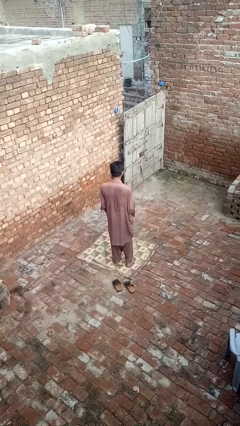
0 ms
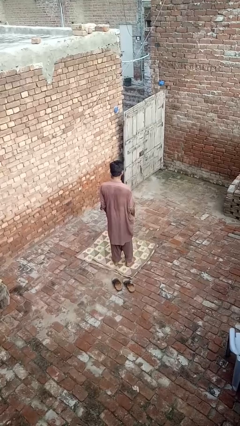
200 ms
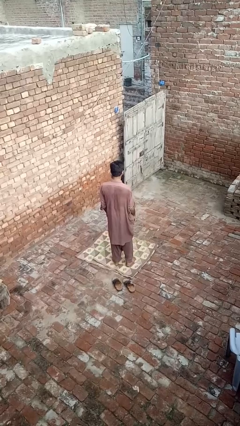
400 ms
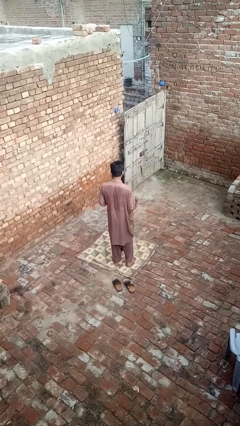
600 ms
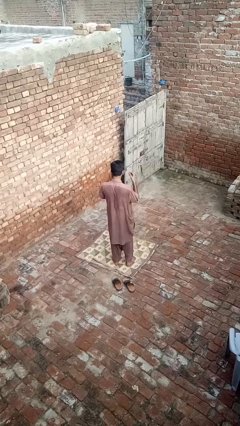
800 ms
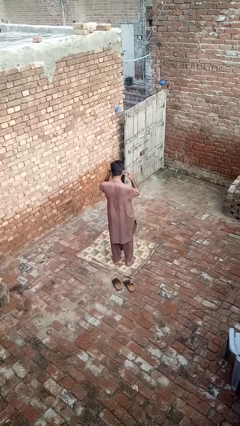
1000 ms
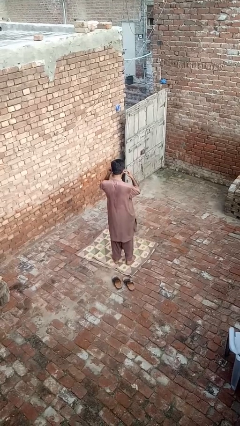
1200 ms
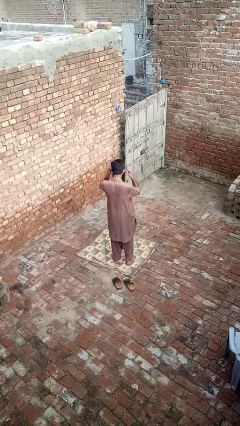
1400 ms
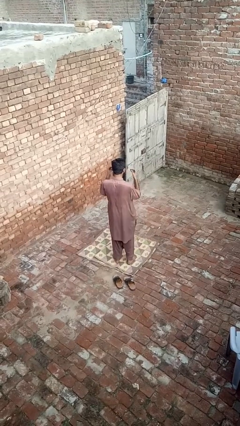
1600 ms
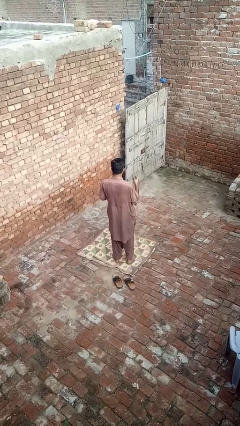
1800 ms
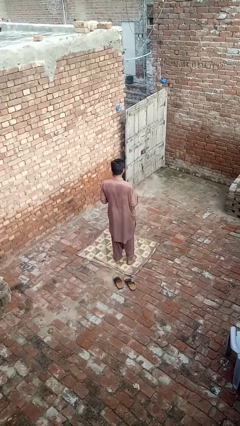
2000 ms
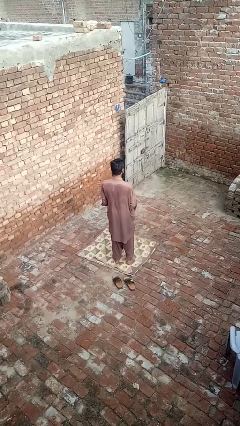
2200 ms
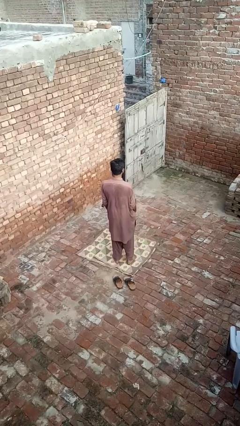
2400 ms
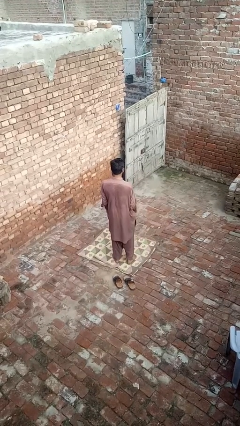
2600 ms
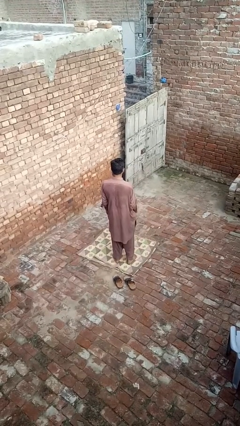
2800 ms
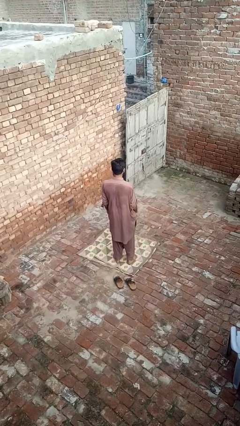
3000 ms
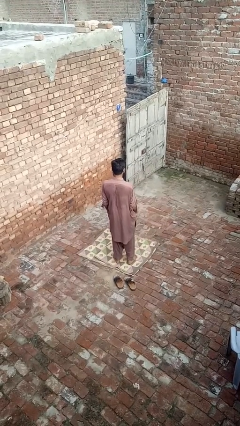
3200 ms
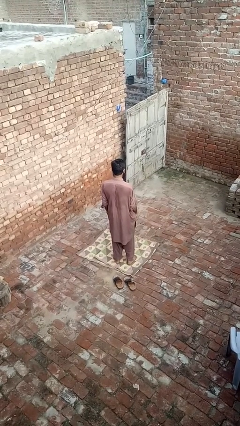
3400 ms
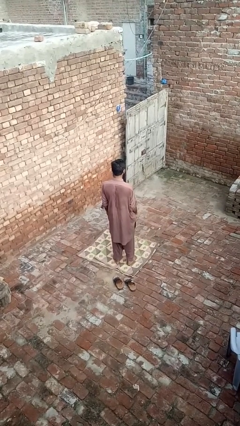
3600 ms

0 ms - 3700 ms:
person takes off headphones

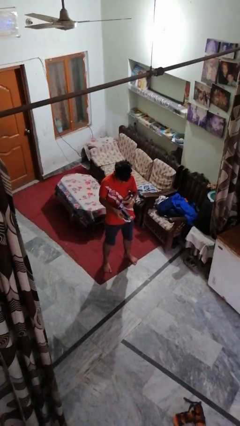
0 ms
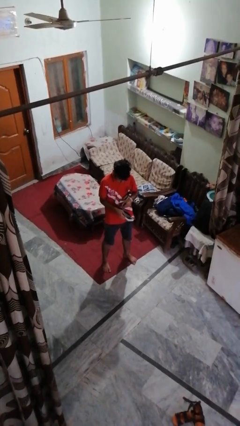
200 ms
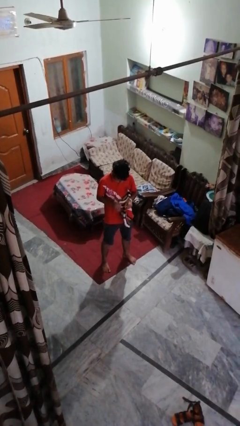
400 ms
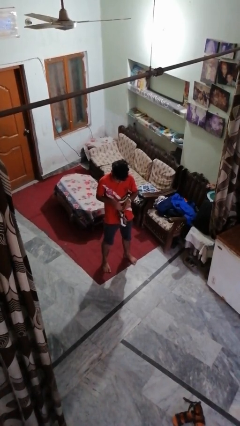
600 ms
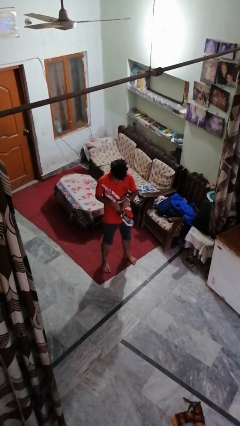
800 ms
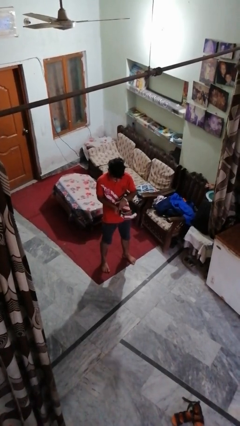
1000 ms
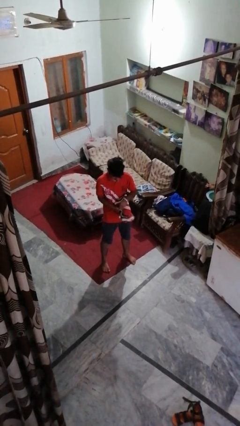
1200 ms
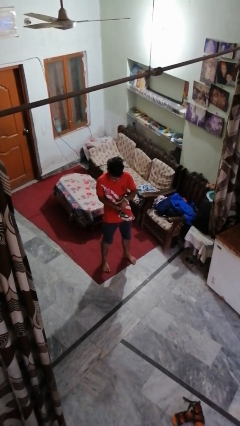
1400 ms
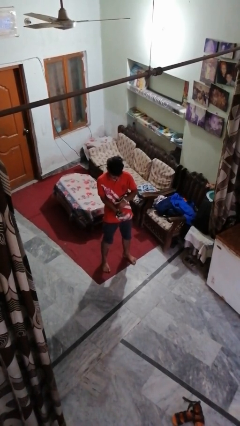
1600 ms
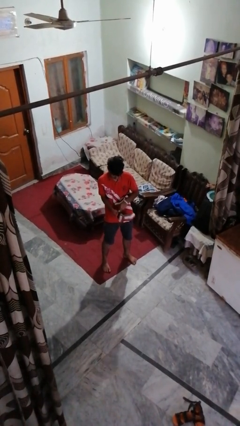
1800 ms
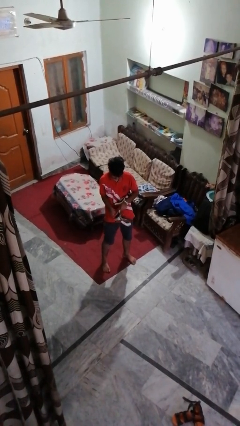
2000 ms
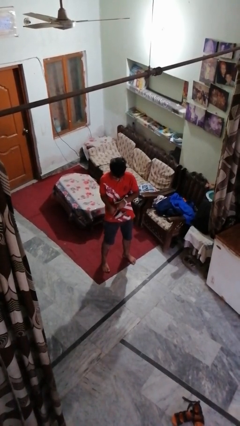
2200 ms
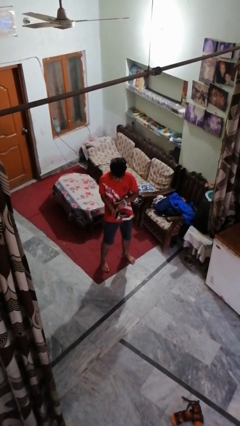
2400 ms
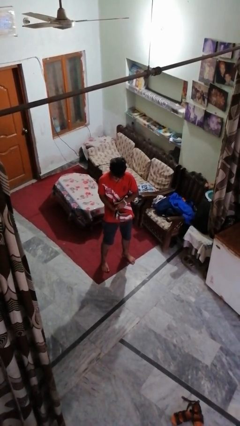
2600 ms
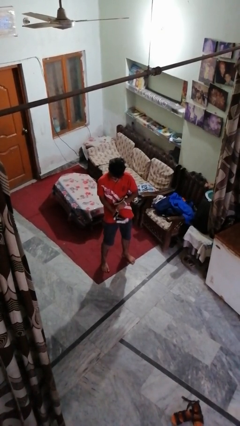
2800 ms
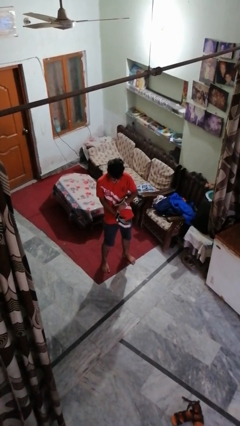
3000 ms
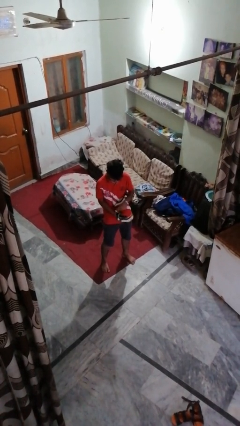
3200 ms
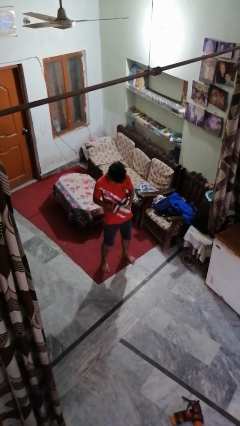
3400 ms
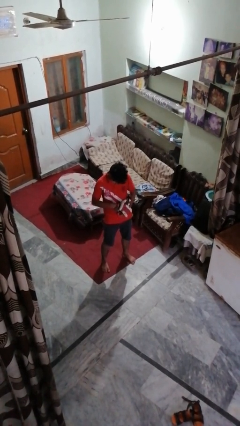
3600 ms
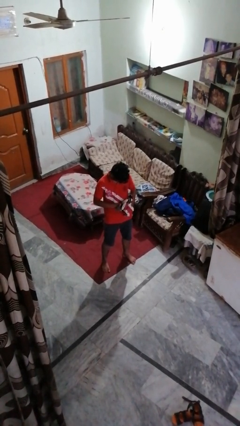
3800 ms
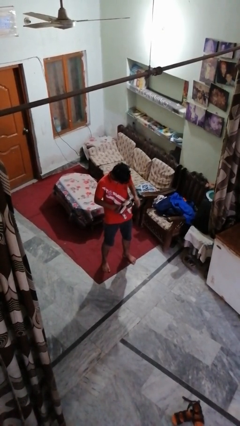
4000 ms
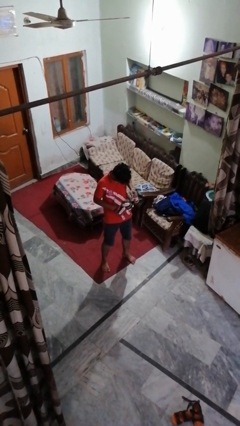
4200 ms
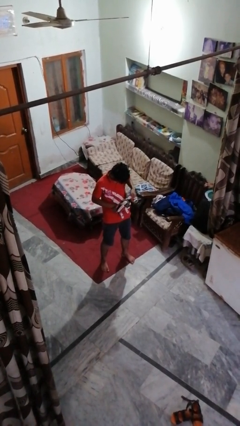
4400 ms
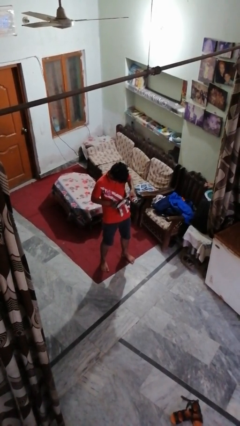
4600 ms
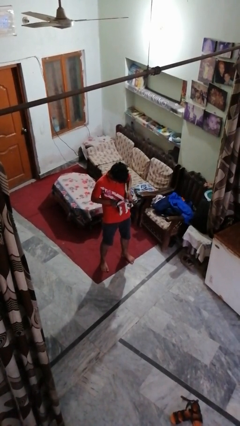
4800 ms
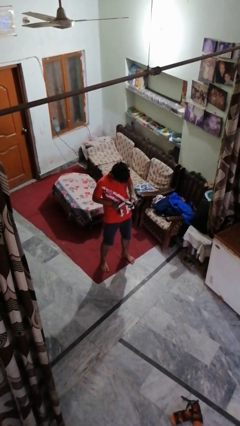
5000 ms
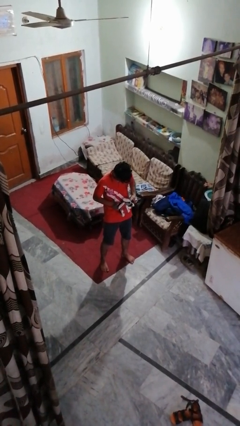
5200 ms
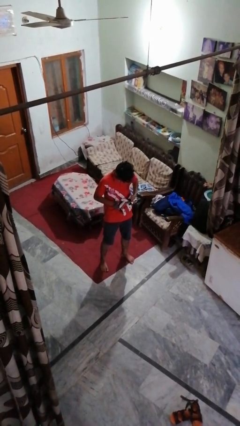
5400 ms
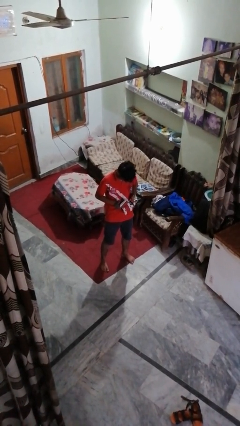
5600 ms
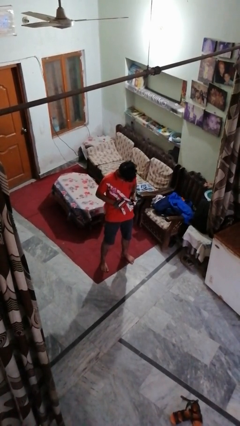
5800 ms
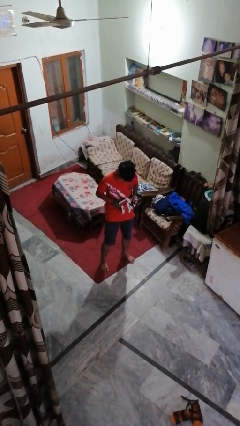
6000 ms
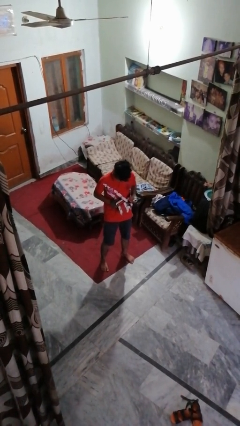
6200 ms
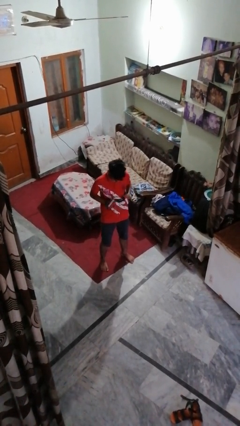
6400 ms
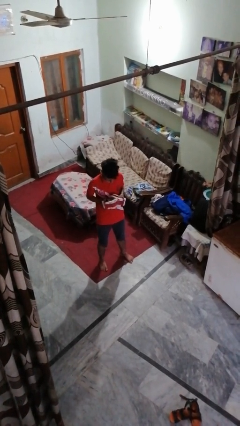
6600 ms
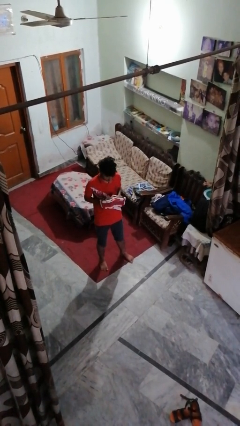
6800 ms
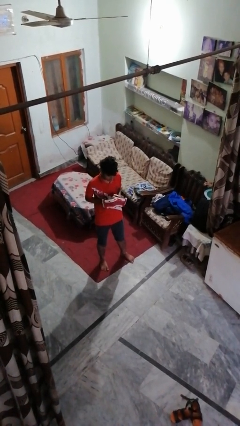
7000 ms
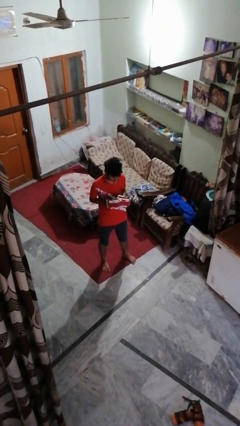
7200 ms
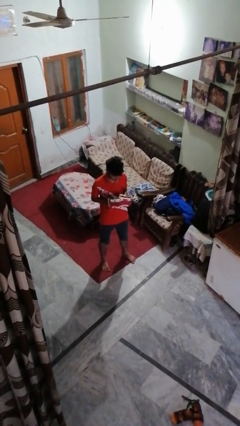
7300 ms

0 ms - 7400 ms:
person puts on gloves

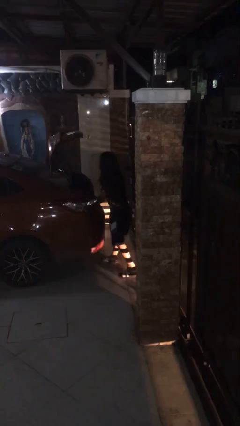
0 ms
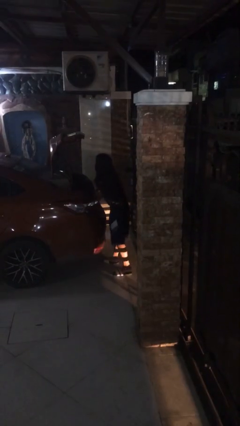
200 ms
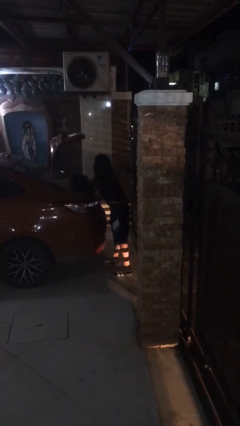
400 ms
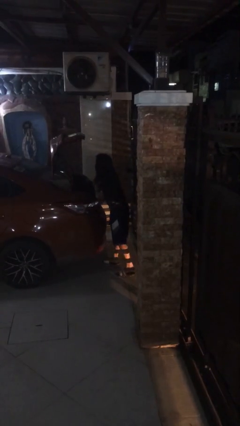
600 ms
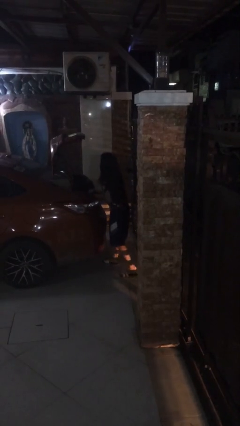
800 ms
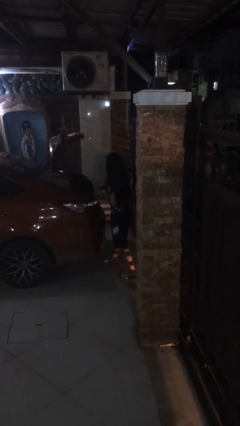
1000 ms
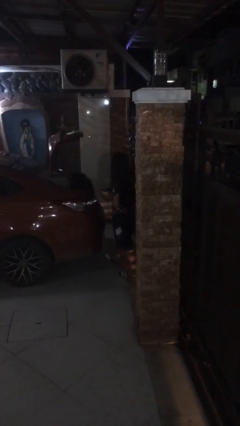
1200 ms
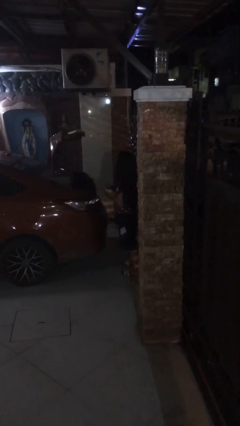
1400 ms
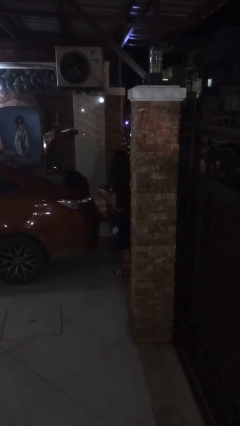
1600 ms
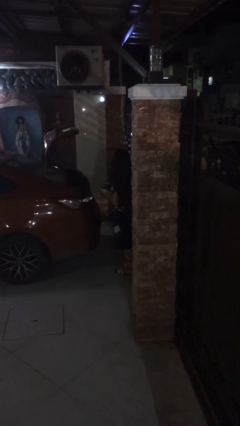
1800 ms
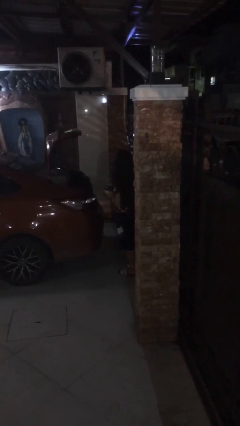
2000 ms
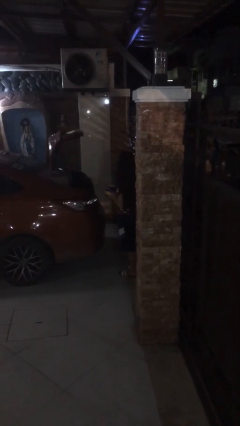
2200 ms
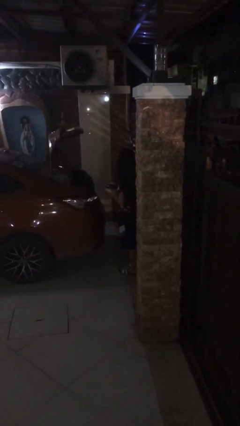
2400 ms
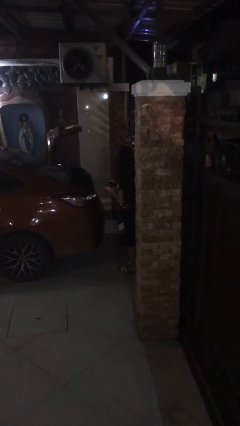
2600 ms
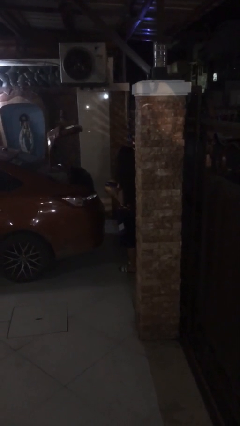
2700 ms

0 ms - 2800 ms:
person unloads car

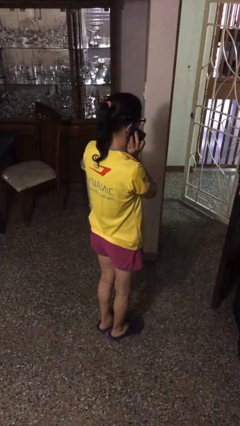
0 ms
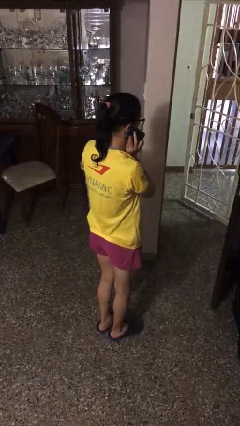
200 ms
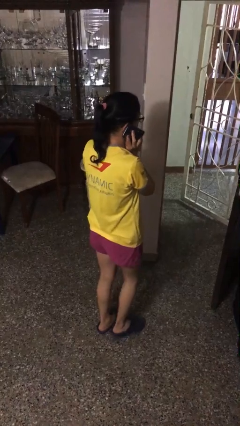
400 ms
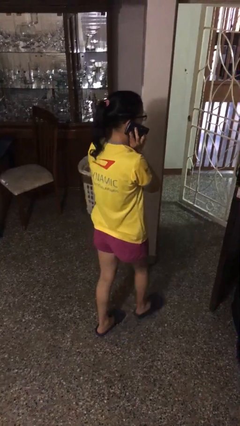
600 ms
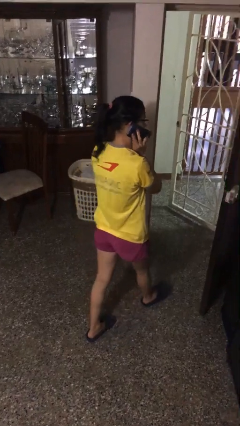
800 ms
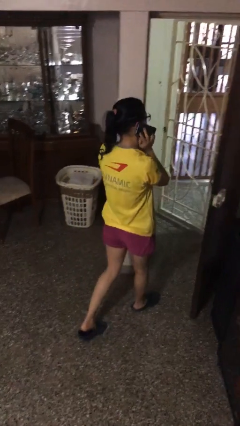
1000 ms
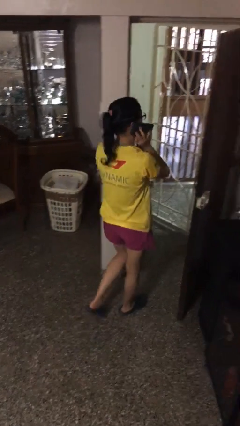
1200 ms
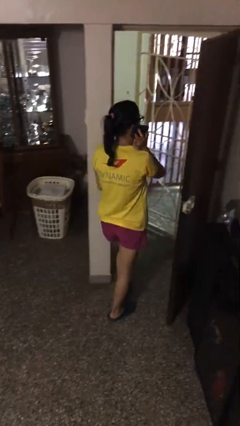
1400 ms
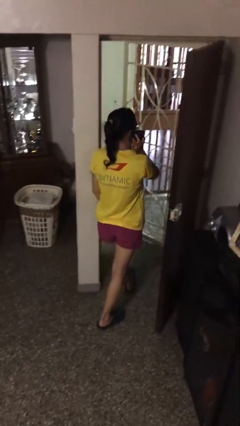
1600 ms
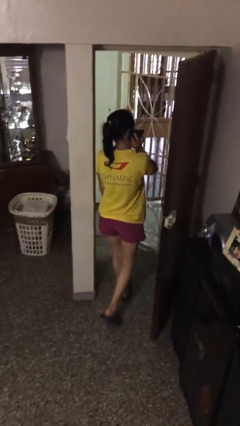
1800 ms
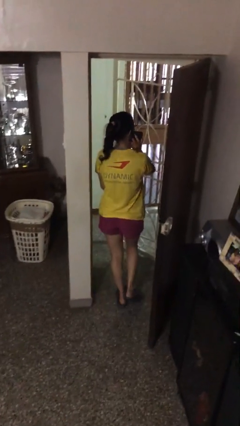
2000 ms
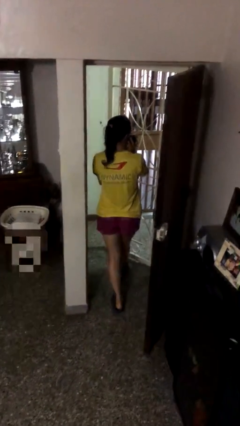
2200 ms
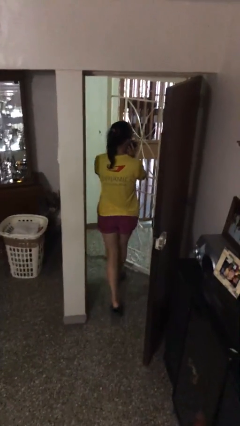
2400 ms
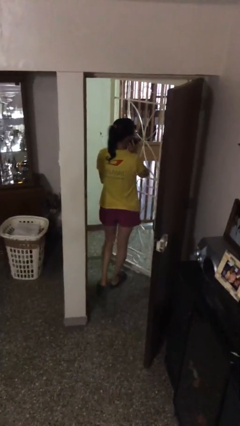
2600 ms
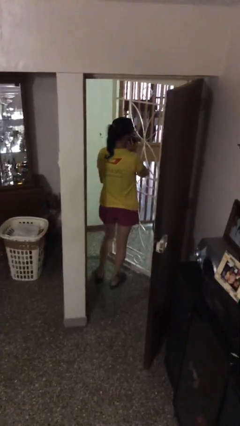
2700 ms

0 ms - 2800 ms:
person exits scene through structure

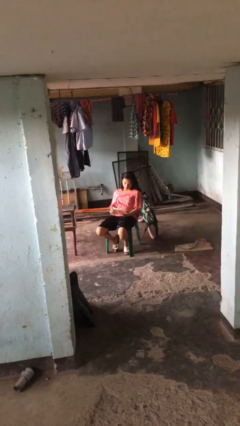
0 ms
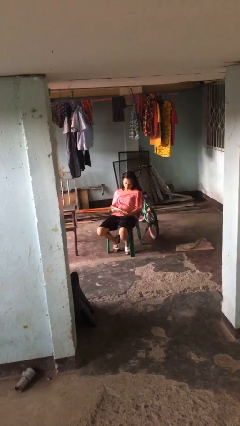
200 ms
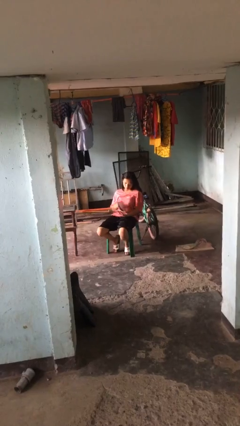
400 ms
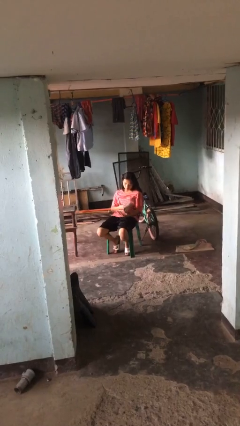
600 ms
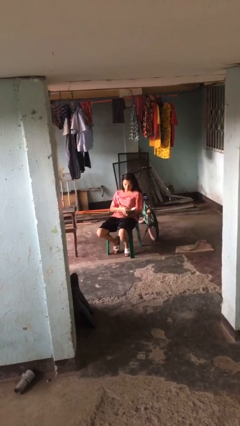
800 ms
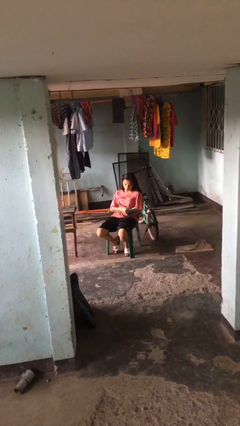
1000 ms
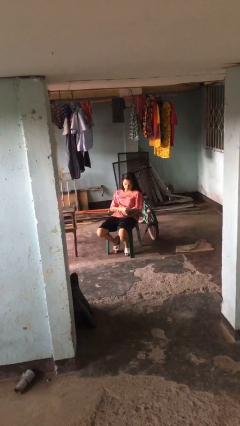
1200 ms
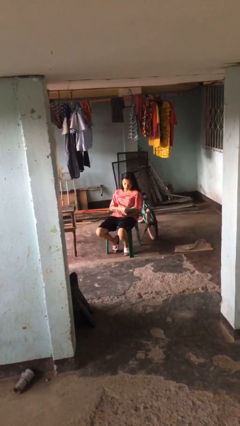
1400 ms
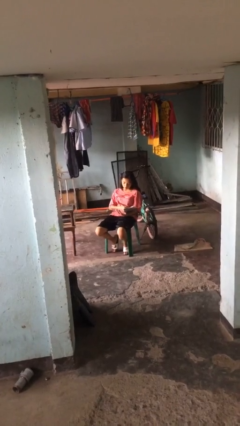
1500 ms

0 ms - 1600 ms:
person reads document
